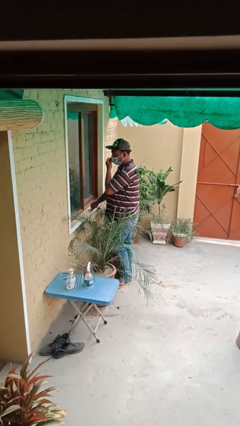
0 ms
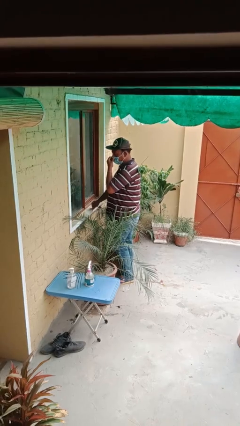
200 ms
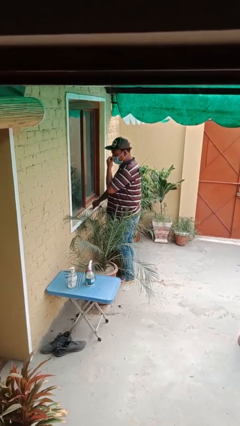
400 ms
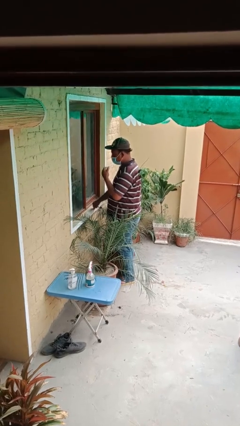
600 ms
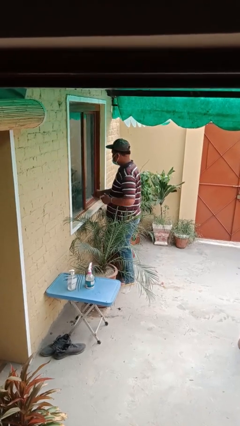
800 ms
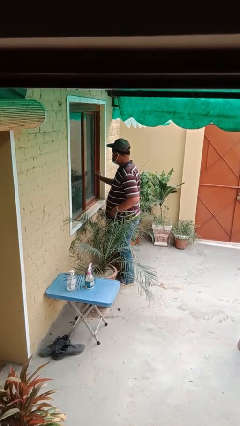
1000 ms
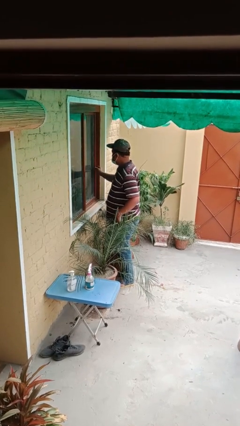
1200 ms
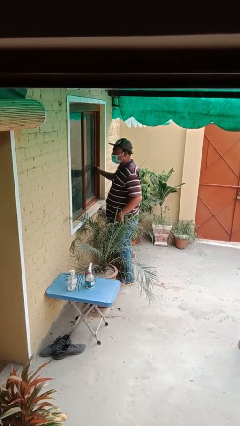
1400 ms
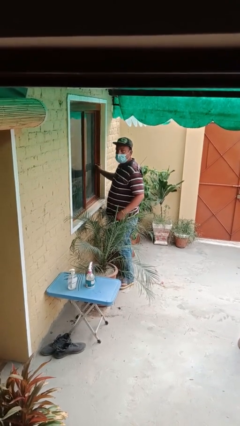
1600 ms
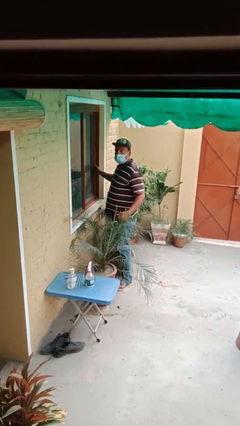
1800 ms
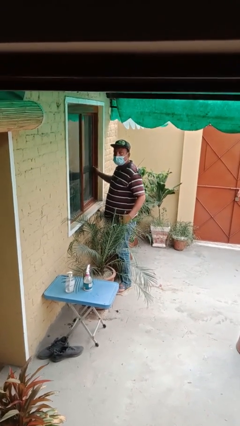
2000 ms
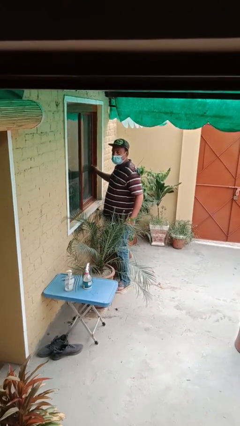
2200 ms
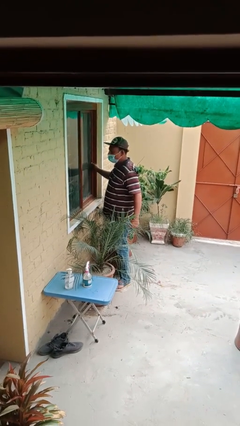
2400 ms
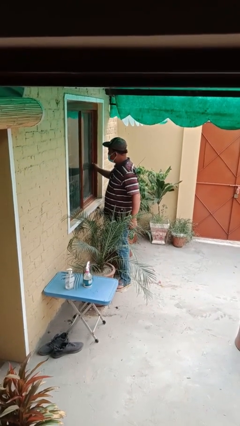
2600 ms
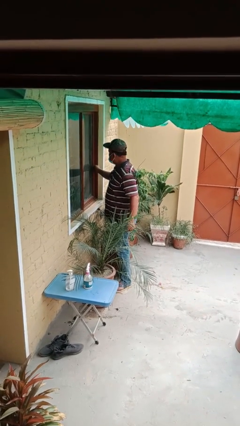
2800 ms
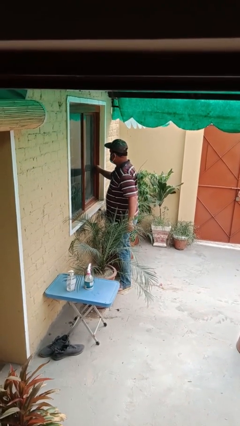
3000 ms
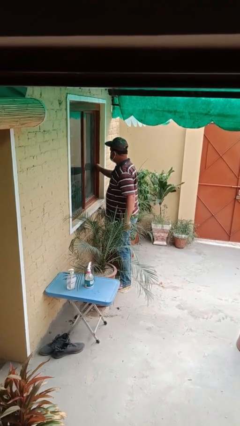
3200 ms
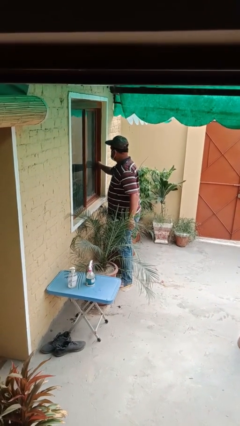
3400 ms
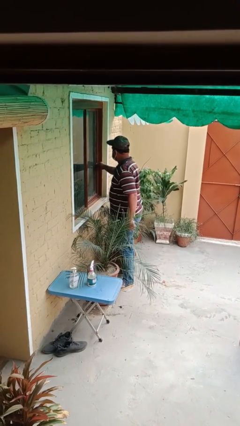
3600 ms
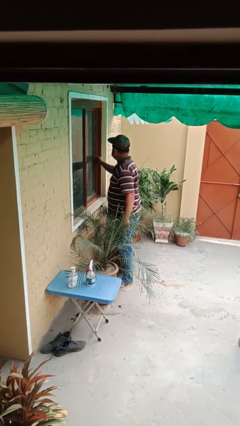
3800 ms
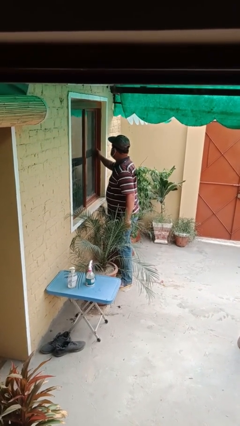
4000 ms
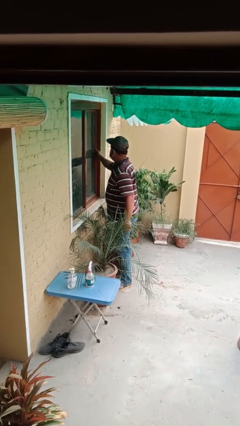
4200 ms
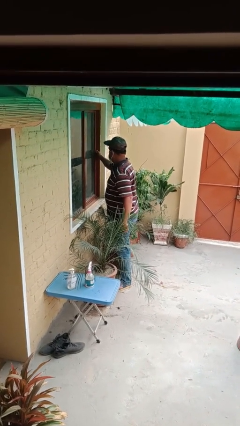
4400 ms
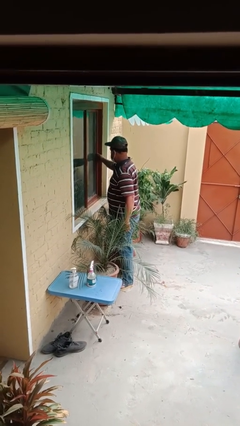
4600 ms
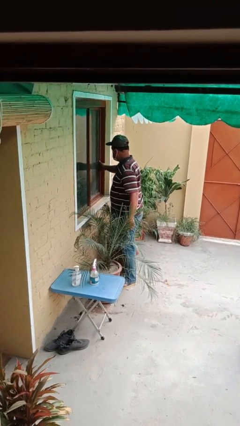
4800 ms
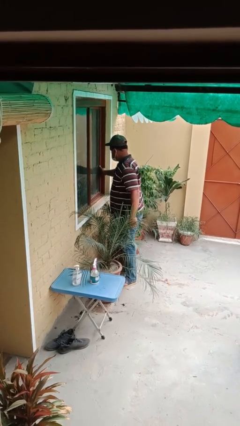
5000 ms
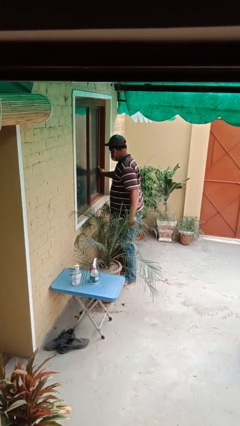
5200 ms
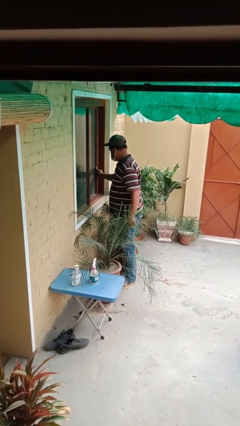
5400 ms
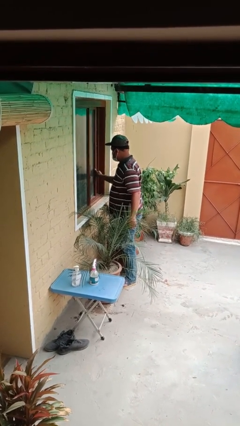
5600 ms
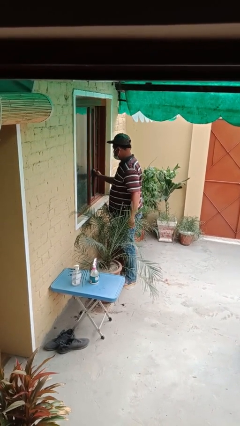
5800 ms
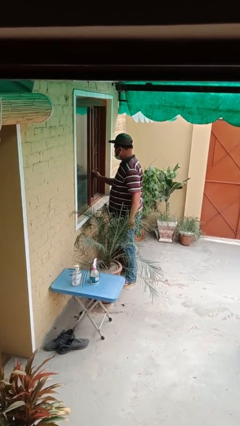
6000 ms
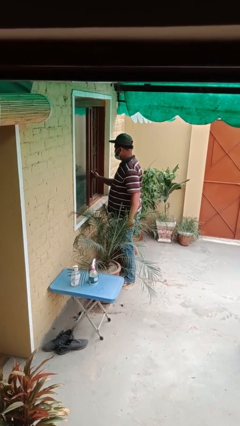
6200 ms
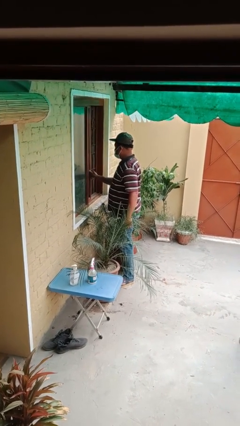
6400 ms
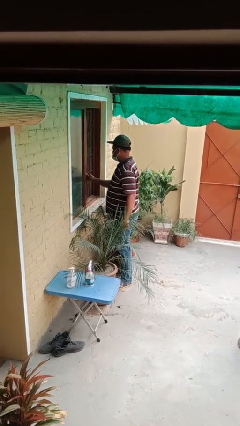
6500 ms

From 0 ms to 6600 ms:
person opens home window

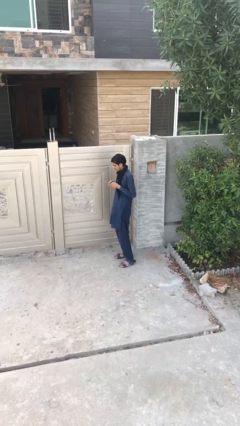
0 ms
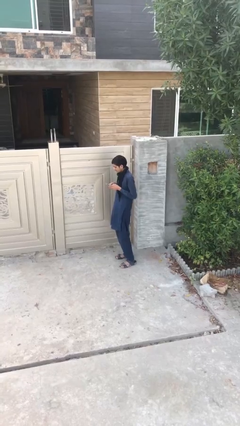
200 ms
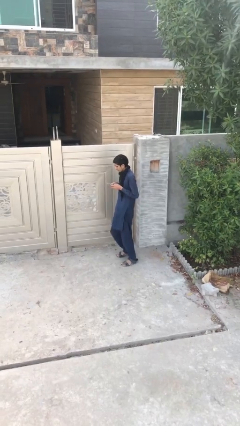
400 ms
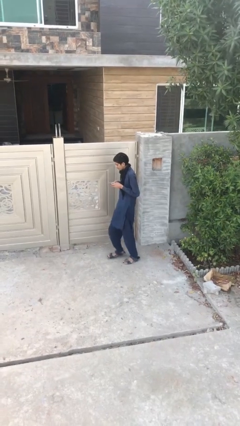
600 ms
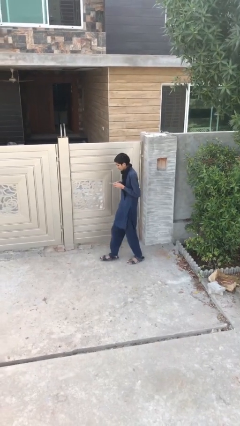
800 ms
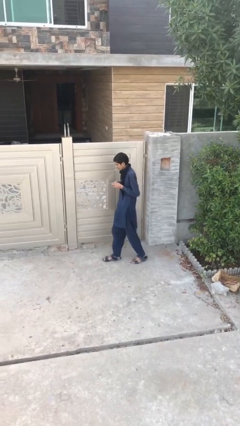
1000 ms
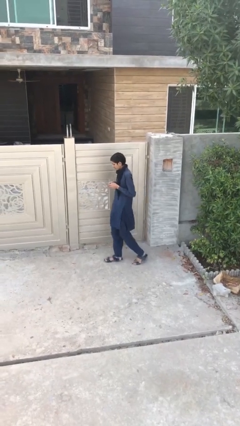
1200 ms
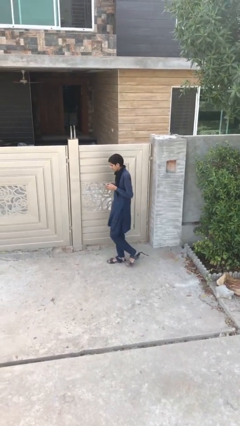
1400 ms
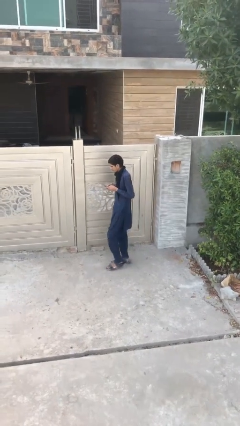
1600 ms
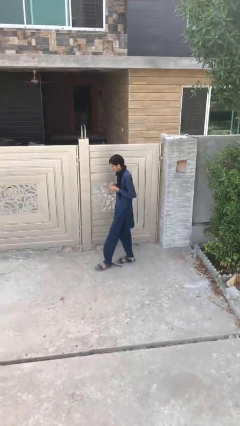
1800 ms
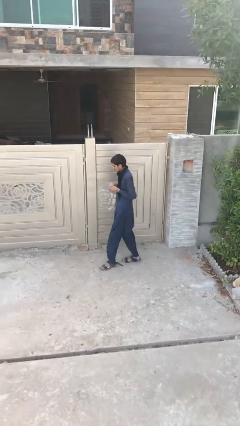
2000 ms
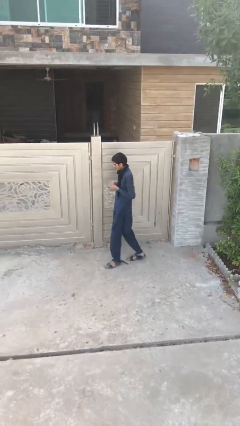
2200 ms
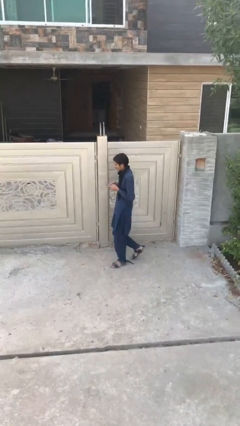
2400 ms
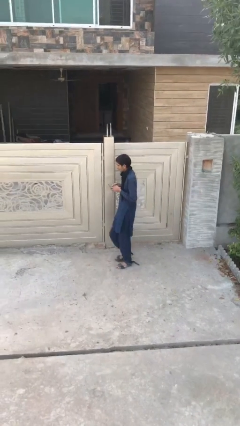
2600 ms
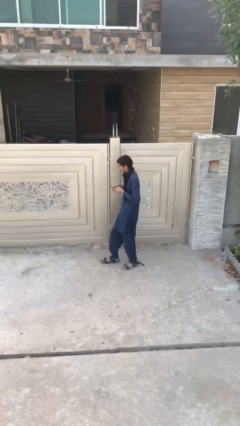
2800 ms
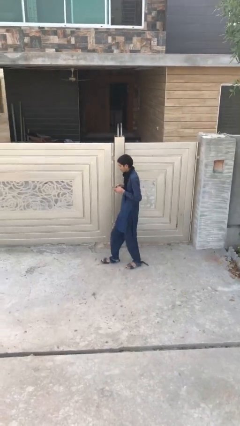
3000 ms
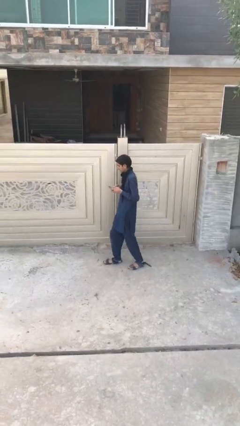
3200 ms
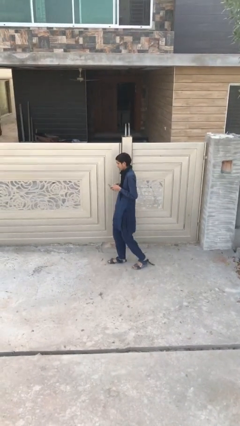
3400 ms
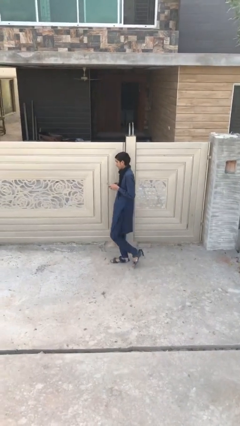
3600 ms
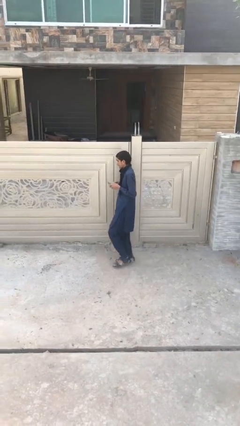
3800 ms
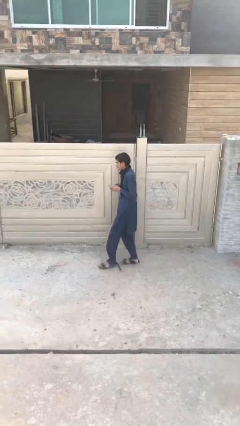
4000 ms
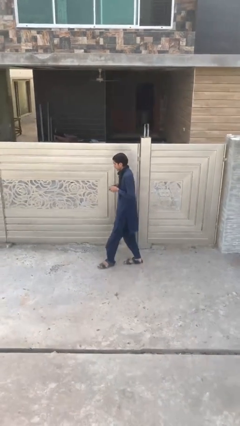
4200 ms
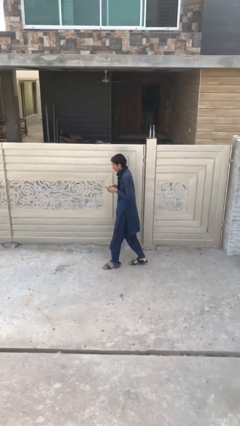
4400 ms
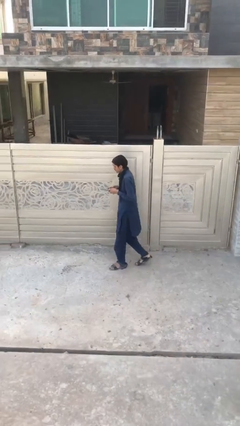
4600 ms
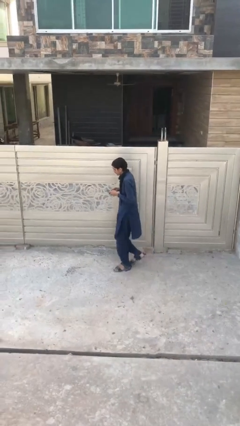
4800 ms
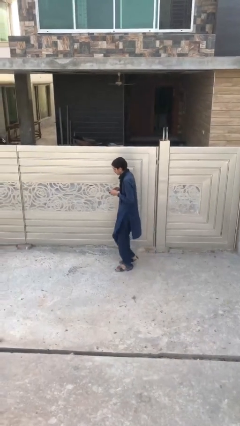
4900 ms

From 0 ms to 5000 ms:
person texts on phone

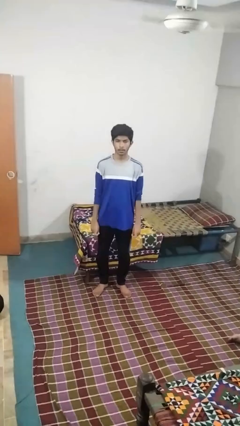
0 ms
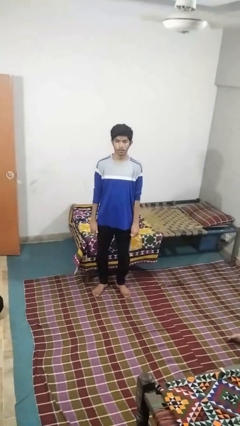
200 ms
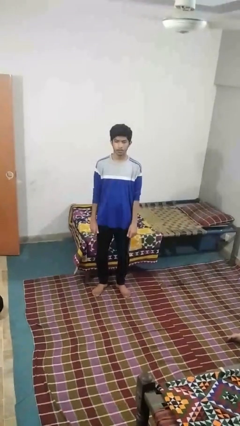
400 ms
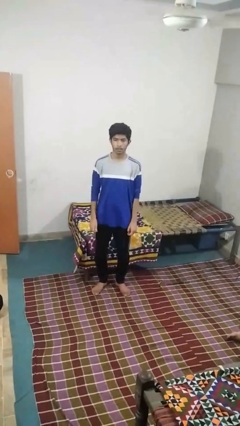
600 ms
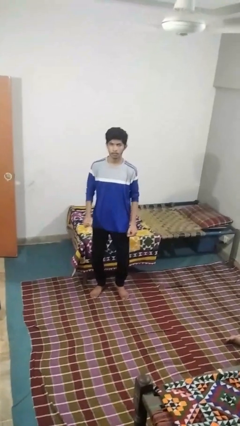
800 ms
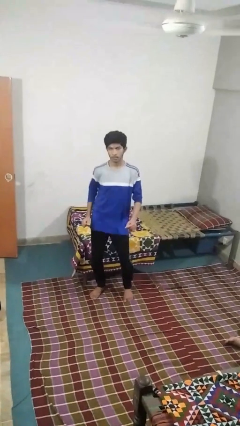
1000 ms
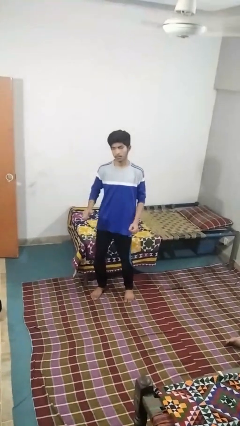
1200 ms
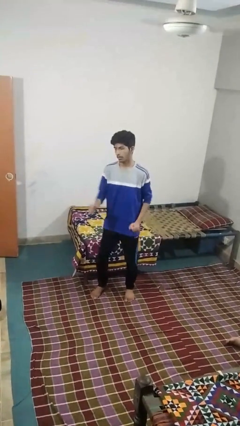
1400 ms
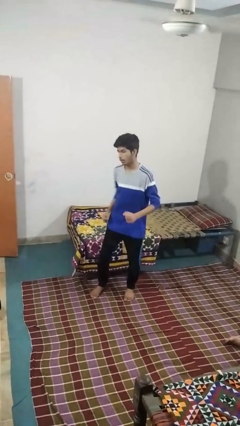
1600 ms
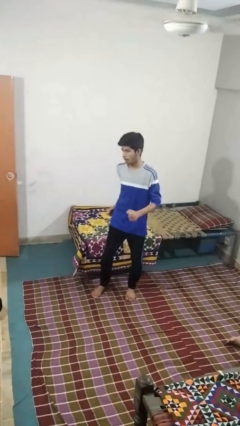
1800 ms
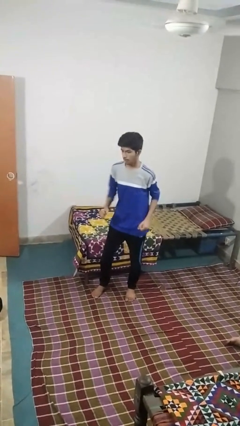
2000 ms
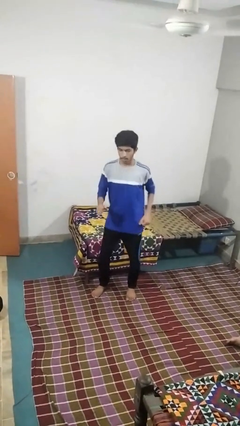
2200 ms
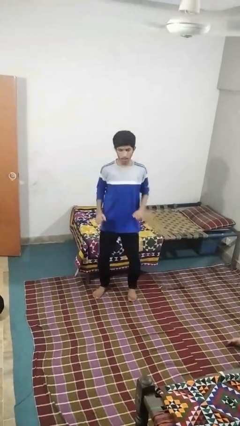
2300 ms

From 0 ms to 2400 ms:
person dances in place

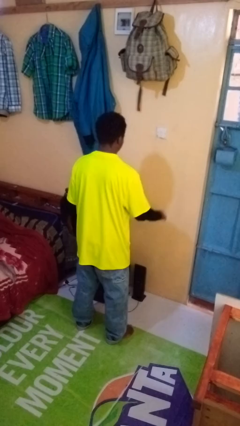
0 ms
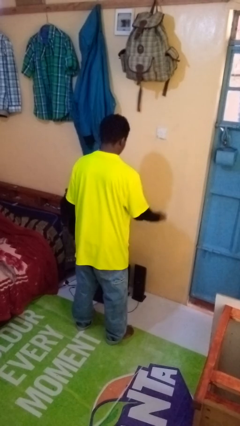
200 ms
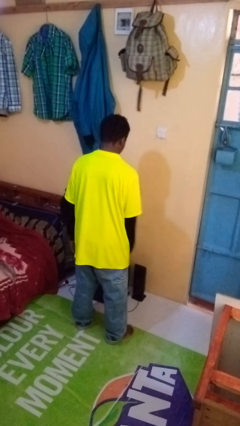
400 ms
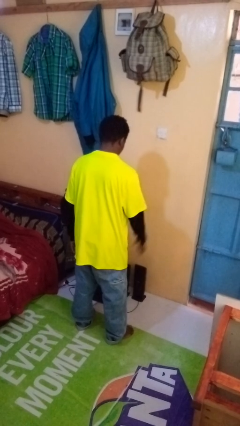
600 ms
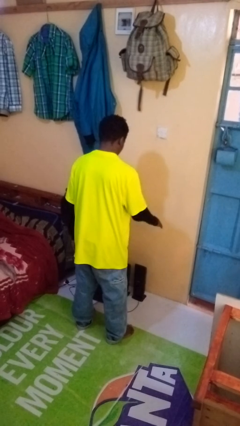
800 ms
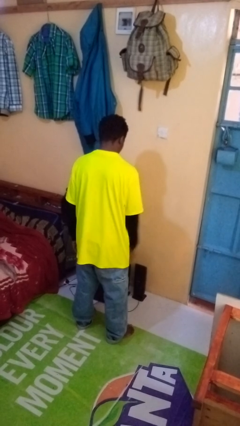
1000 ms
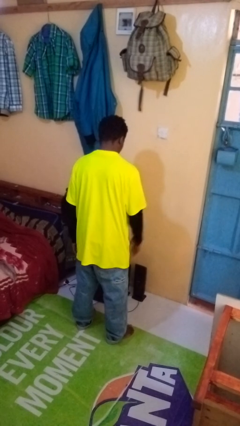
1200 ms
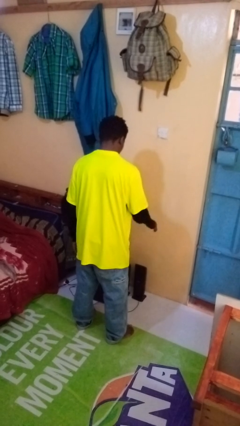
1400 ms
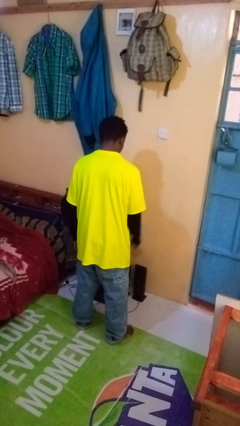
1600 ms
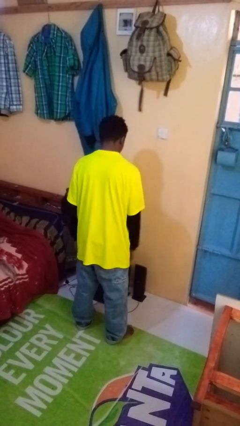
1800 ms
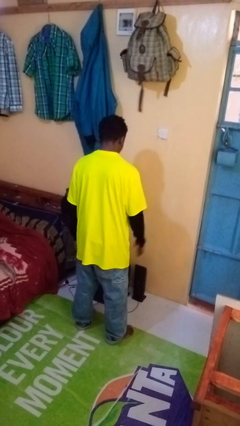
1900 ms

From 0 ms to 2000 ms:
person slaps hands on thighs

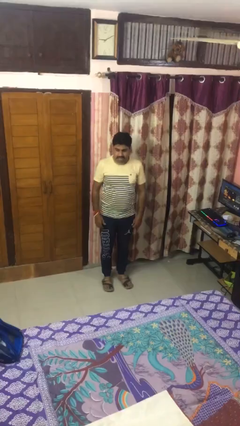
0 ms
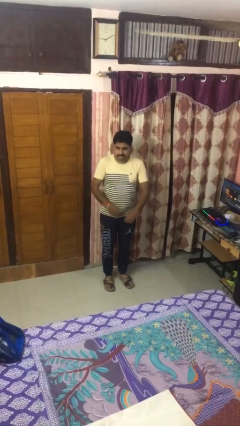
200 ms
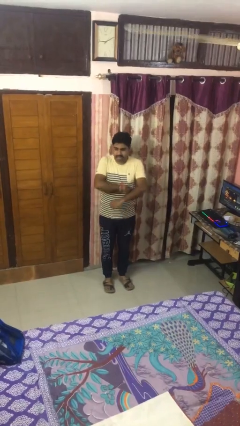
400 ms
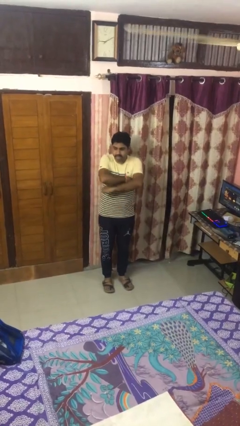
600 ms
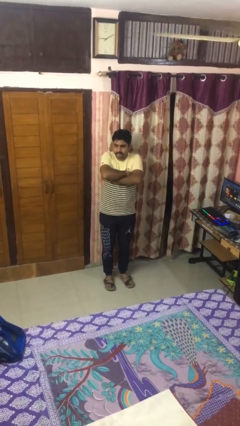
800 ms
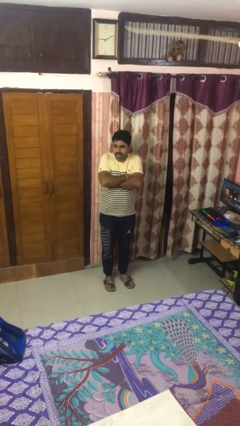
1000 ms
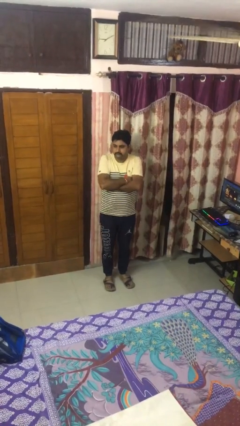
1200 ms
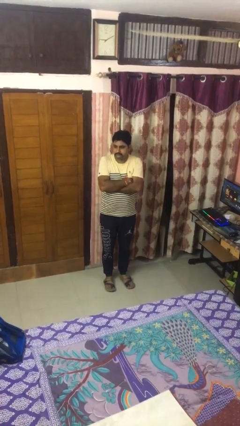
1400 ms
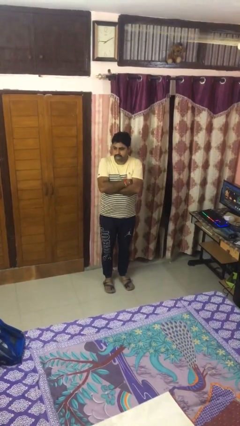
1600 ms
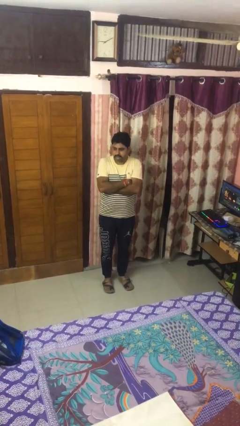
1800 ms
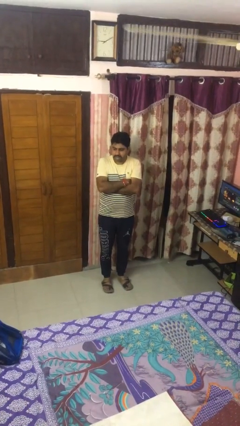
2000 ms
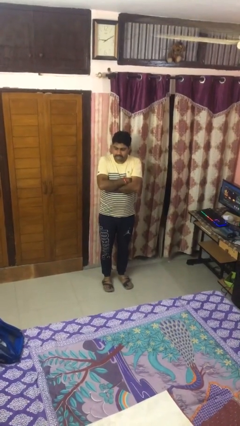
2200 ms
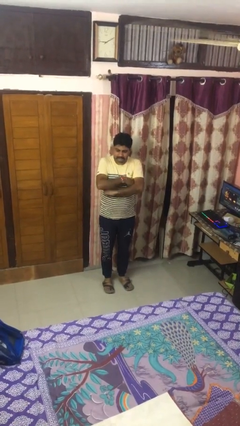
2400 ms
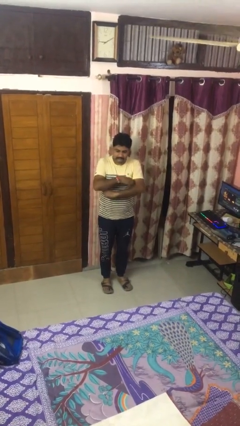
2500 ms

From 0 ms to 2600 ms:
person crosses arms
